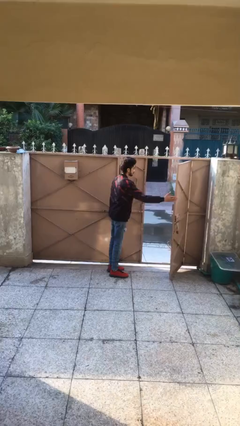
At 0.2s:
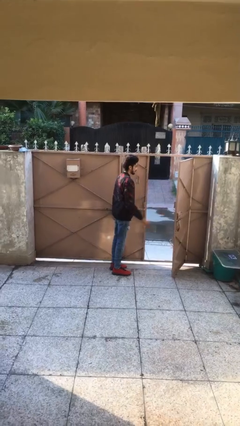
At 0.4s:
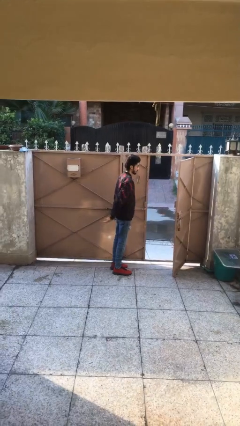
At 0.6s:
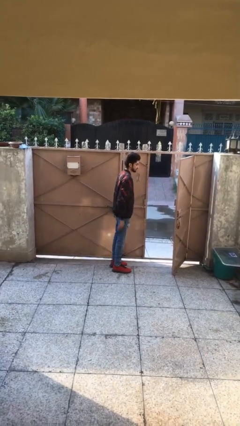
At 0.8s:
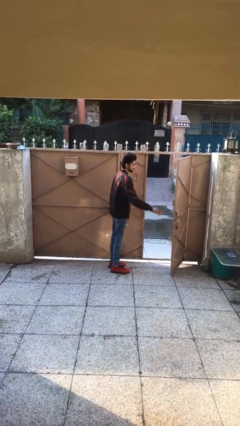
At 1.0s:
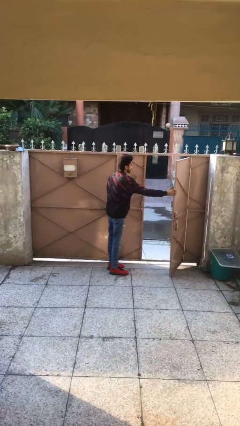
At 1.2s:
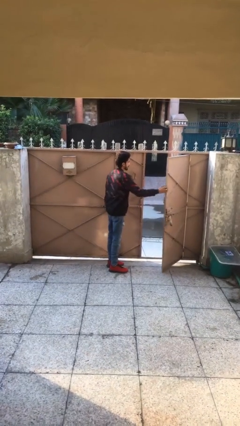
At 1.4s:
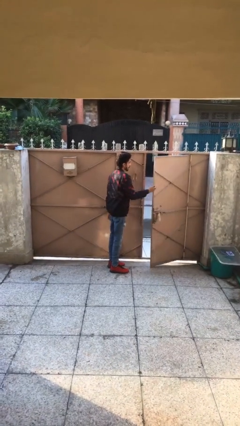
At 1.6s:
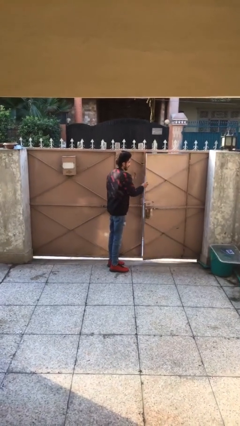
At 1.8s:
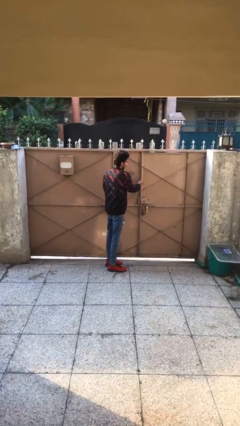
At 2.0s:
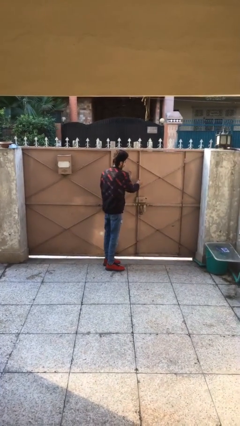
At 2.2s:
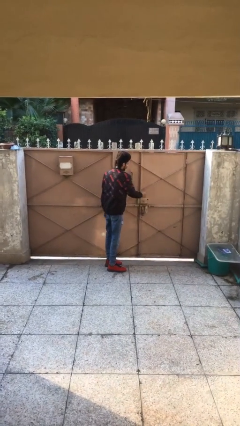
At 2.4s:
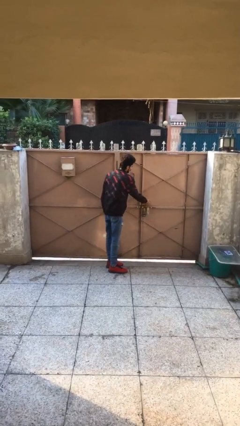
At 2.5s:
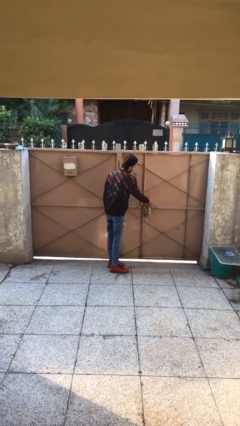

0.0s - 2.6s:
person closes facility door

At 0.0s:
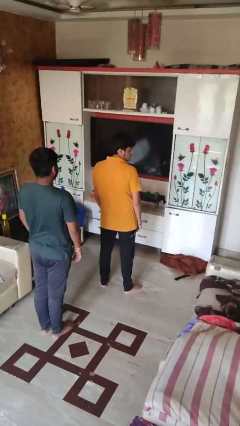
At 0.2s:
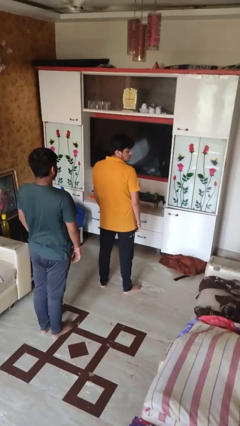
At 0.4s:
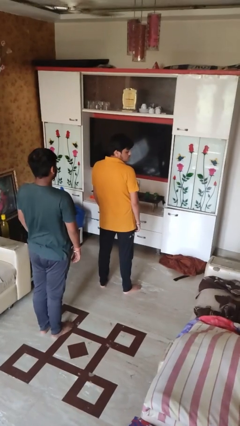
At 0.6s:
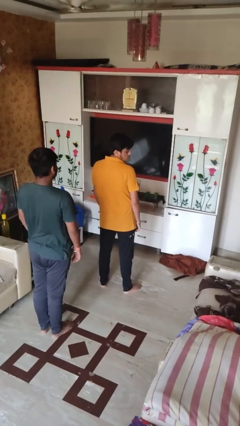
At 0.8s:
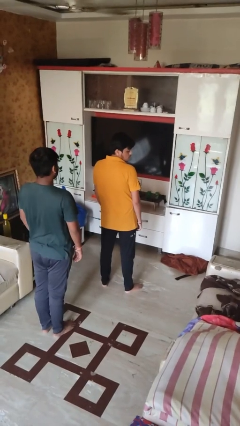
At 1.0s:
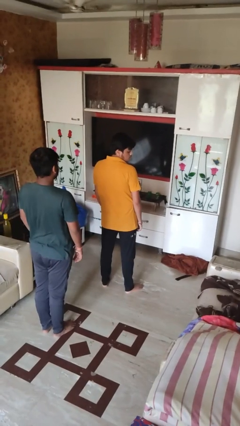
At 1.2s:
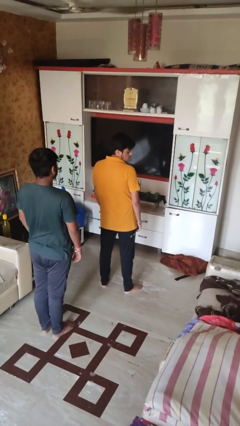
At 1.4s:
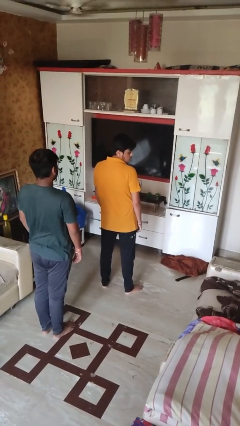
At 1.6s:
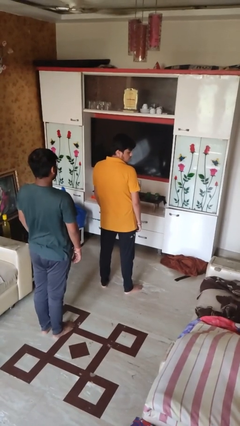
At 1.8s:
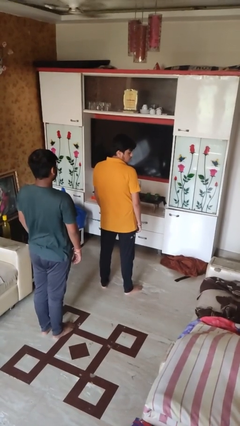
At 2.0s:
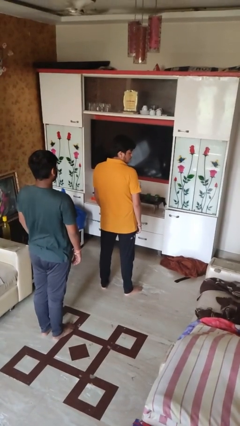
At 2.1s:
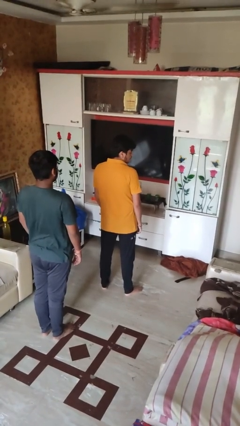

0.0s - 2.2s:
person looks over shoulder

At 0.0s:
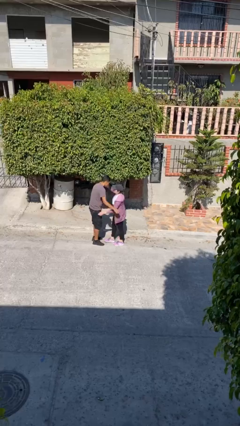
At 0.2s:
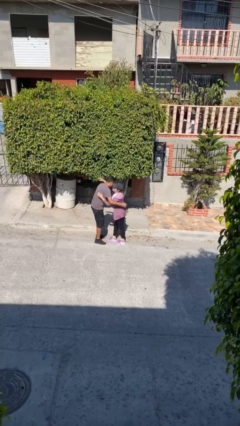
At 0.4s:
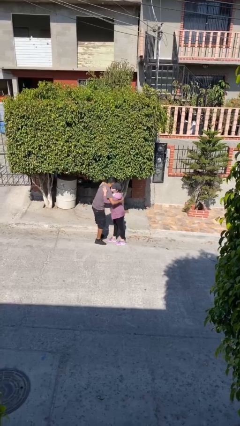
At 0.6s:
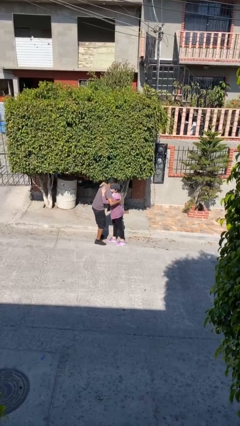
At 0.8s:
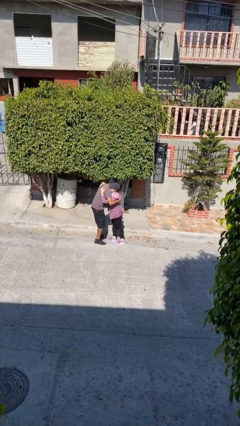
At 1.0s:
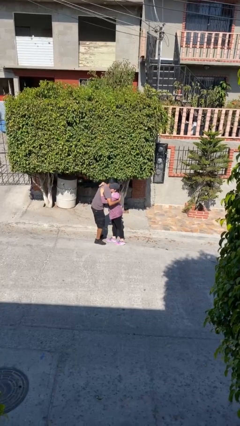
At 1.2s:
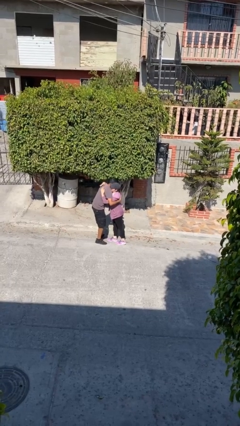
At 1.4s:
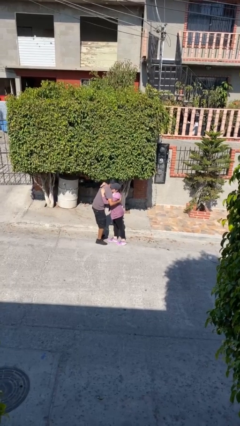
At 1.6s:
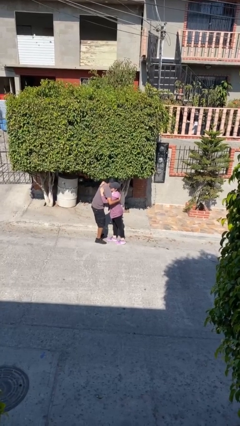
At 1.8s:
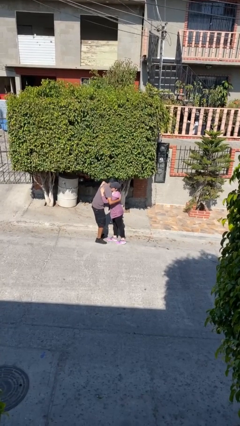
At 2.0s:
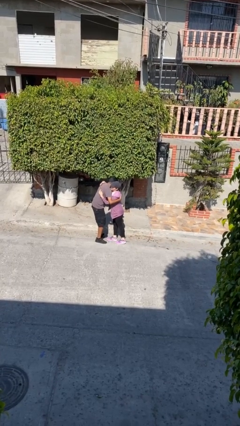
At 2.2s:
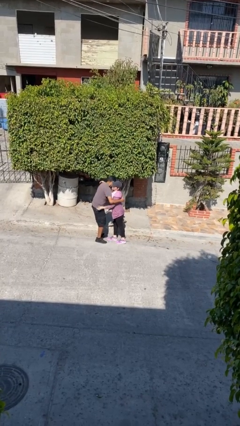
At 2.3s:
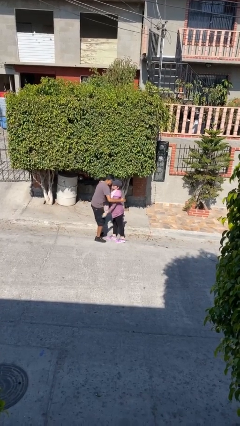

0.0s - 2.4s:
person embraces person

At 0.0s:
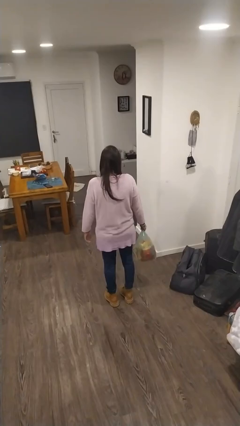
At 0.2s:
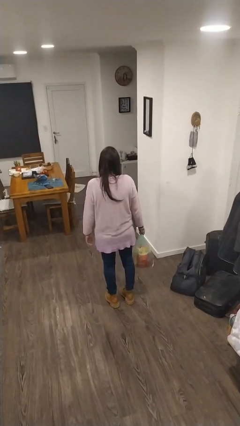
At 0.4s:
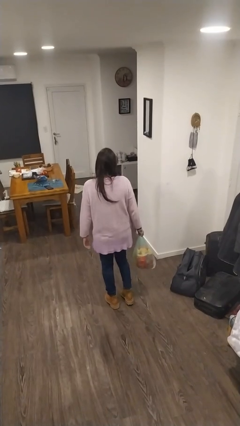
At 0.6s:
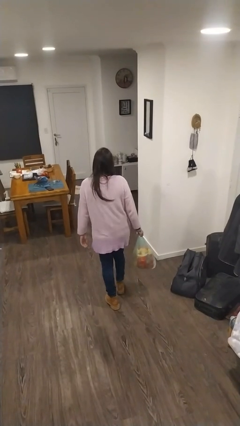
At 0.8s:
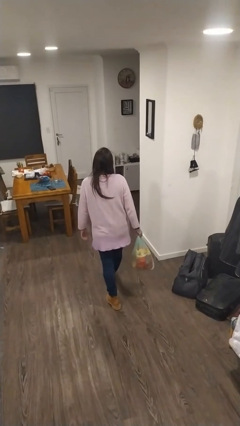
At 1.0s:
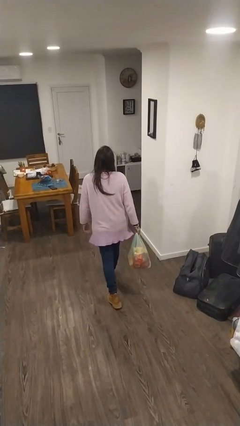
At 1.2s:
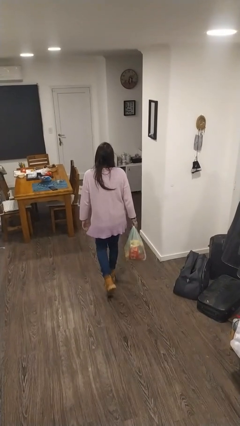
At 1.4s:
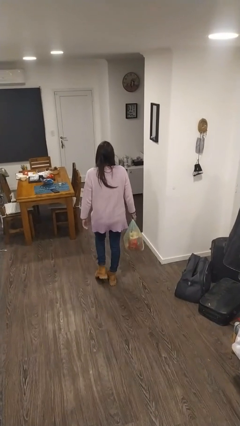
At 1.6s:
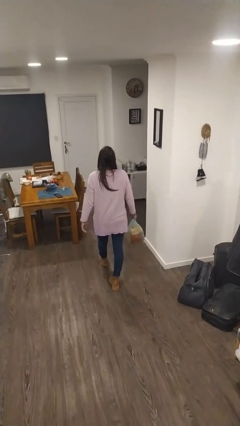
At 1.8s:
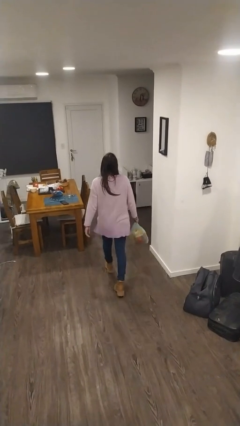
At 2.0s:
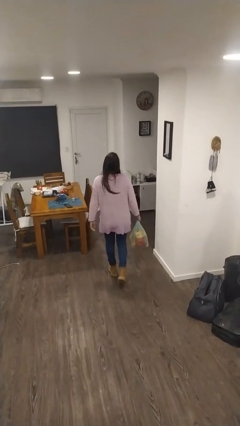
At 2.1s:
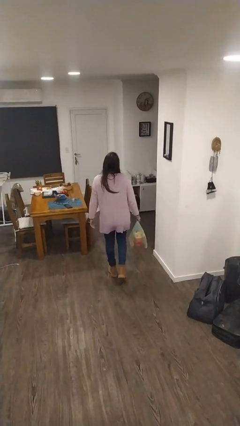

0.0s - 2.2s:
person carries groceries

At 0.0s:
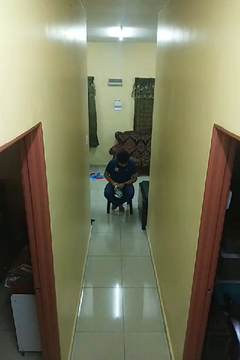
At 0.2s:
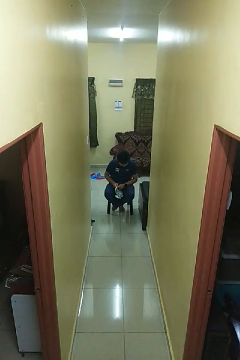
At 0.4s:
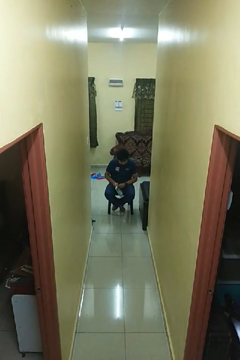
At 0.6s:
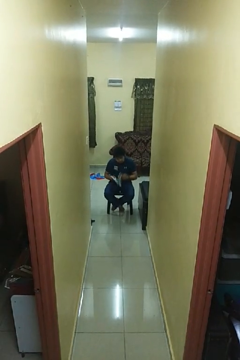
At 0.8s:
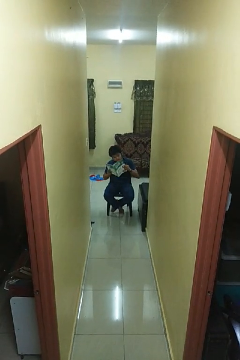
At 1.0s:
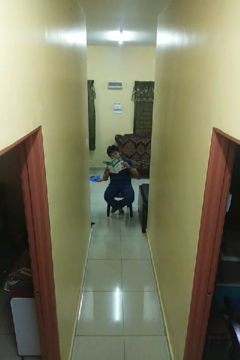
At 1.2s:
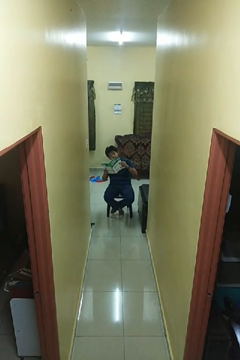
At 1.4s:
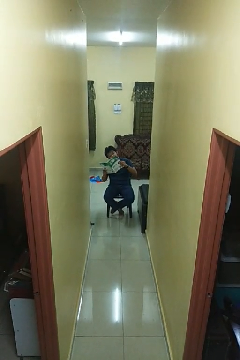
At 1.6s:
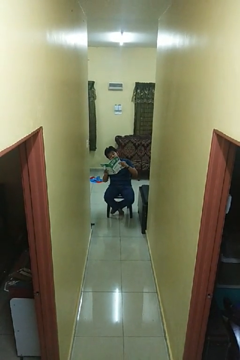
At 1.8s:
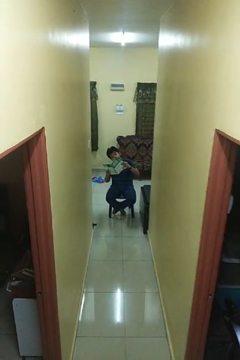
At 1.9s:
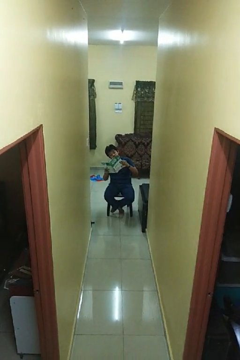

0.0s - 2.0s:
person reads magazine

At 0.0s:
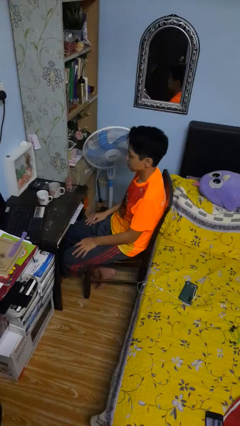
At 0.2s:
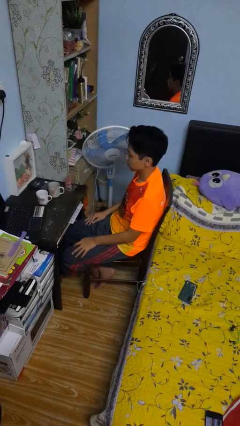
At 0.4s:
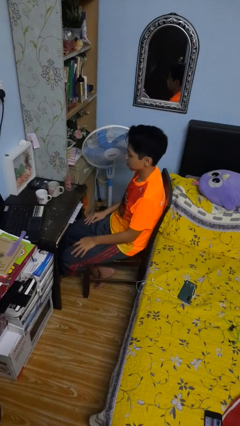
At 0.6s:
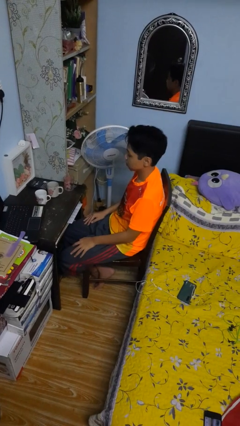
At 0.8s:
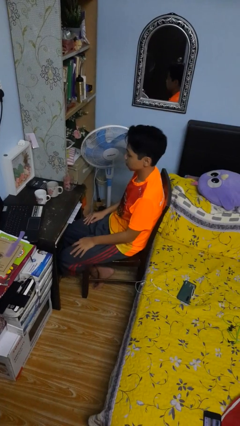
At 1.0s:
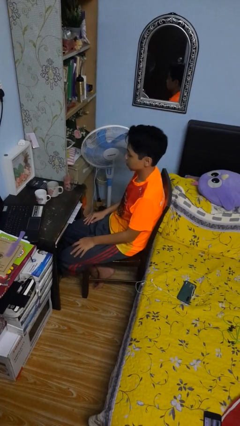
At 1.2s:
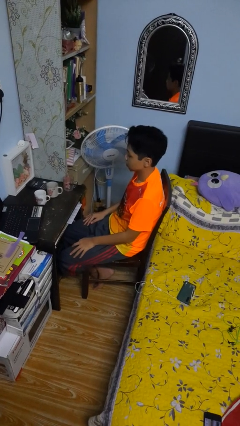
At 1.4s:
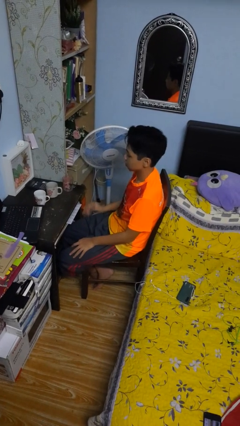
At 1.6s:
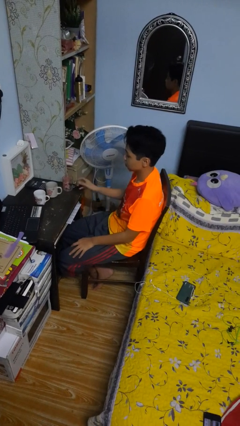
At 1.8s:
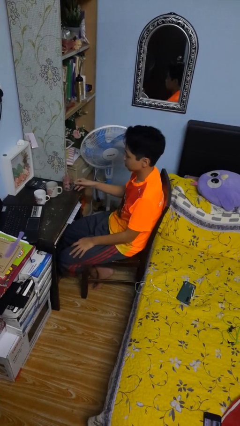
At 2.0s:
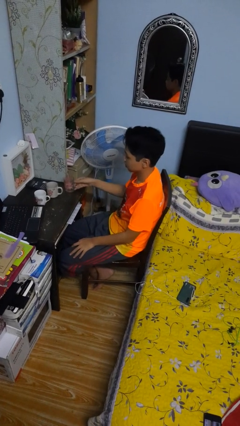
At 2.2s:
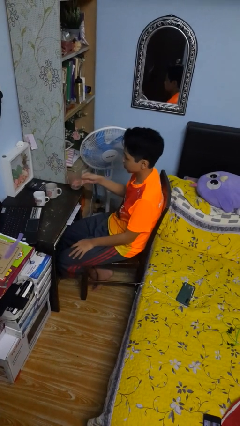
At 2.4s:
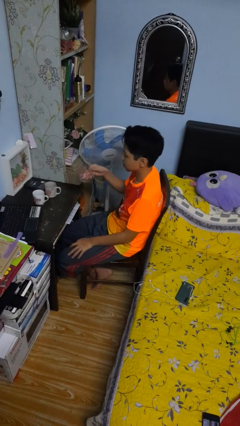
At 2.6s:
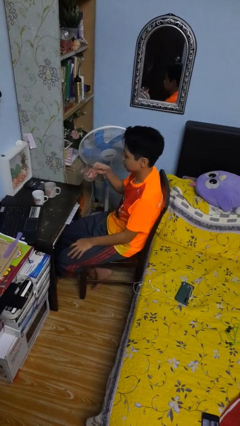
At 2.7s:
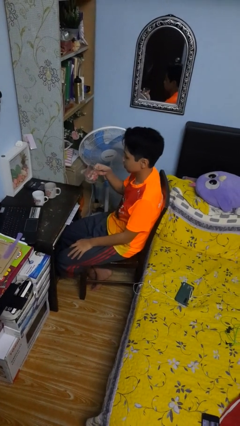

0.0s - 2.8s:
person picks up object from table

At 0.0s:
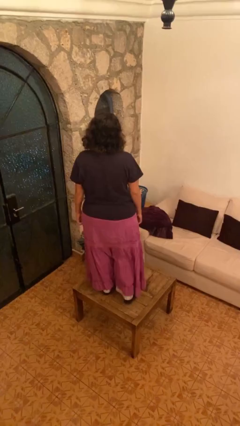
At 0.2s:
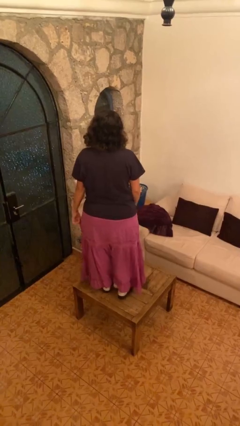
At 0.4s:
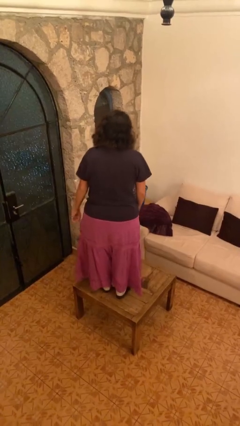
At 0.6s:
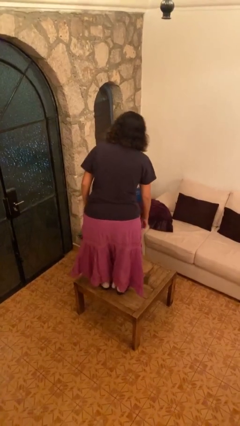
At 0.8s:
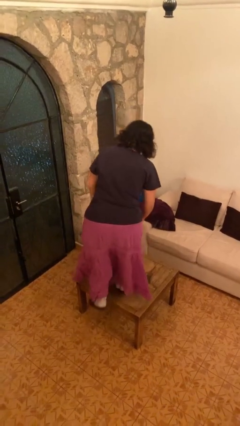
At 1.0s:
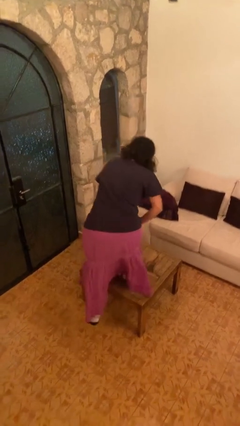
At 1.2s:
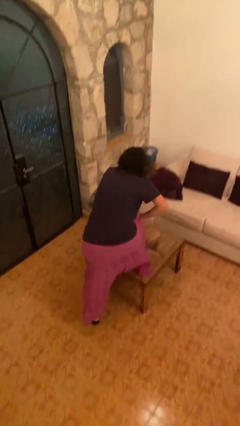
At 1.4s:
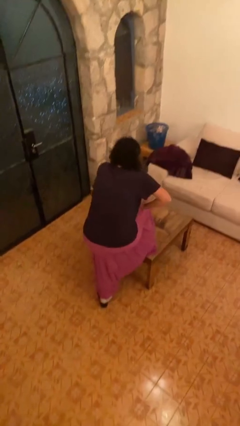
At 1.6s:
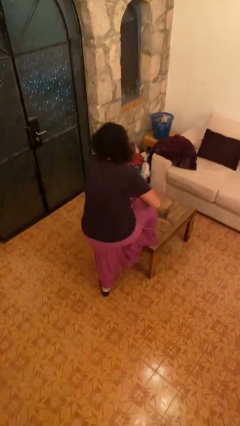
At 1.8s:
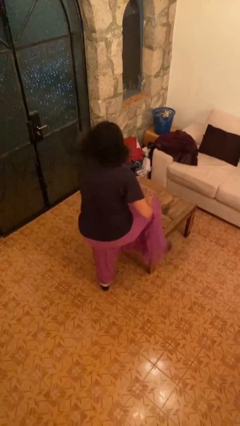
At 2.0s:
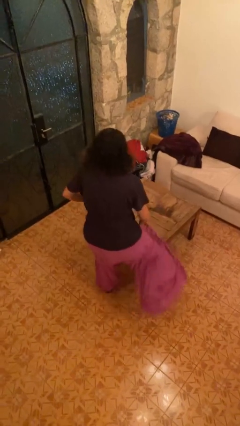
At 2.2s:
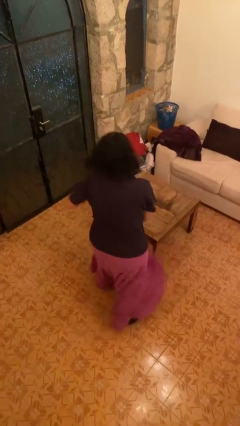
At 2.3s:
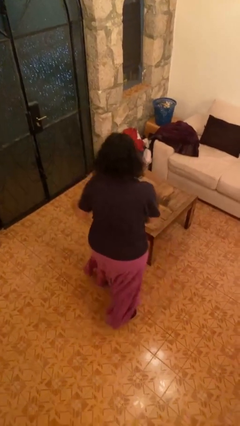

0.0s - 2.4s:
person climbs off table

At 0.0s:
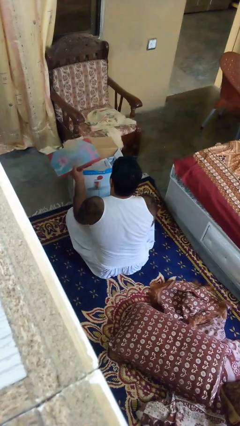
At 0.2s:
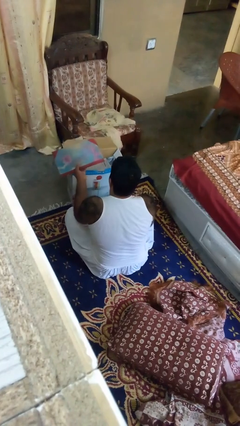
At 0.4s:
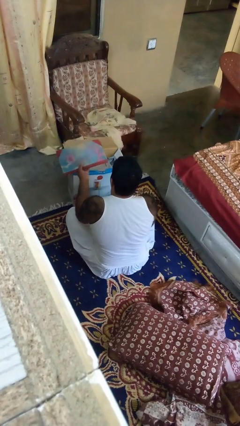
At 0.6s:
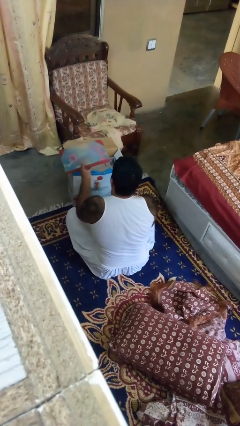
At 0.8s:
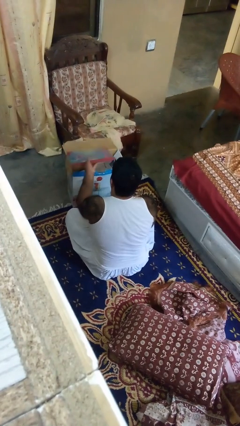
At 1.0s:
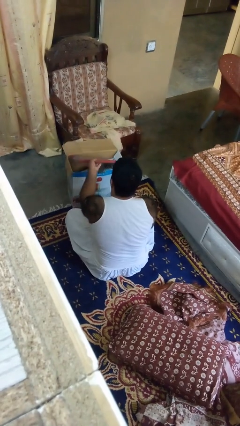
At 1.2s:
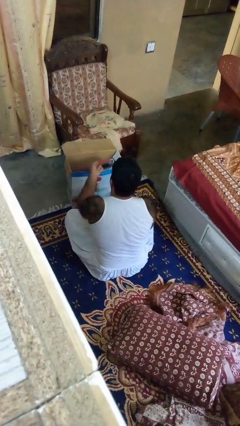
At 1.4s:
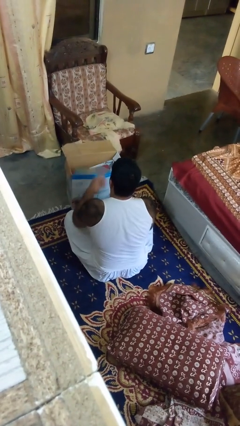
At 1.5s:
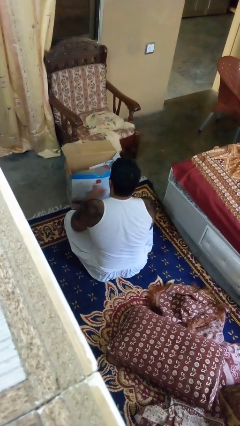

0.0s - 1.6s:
person puts object into box
